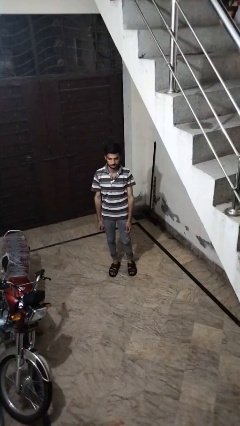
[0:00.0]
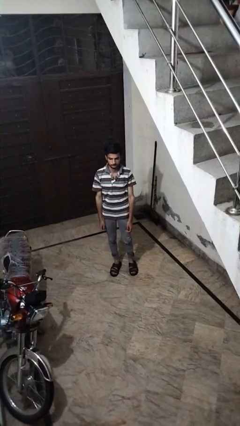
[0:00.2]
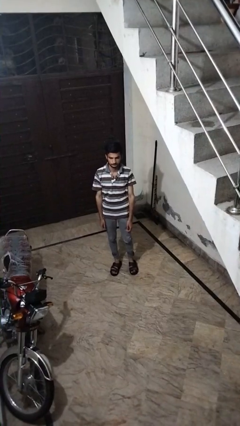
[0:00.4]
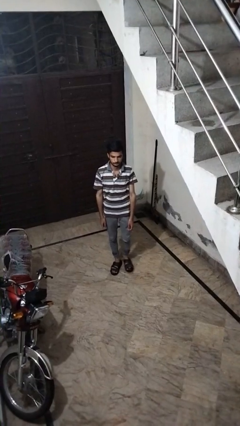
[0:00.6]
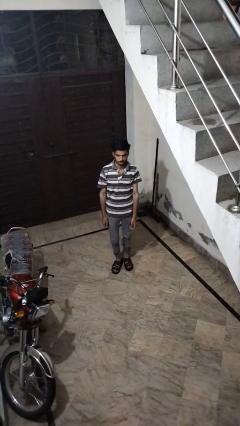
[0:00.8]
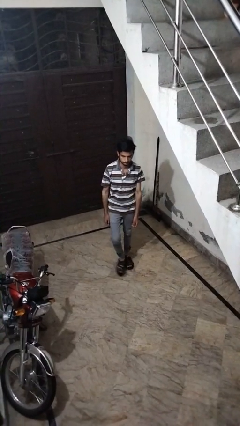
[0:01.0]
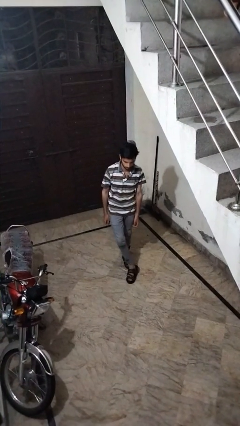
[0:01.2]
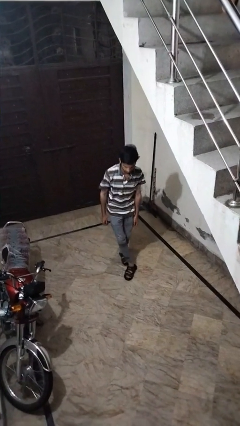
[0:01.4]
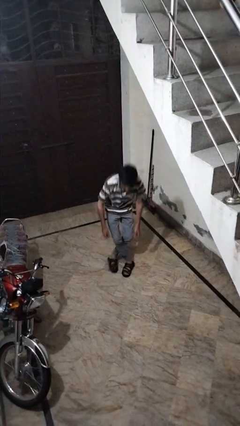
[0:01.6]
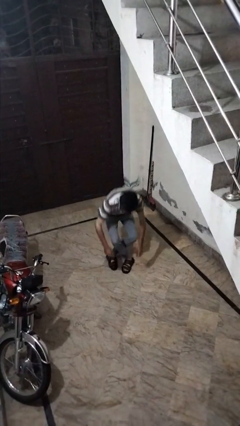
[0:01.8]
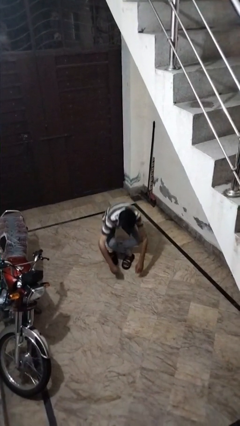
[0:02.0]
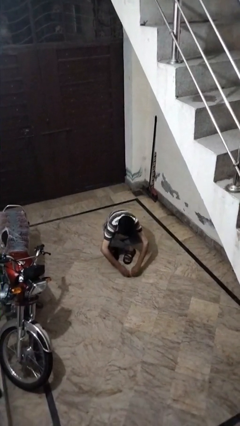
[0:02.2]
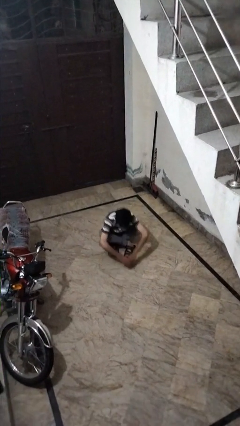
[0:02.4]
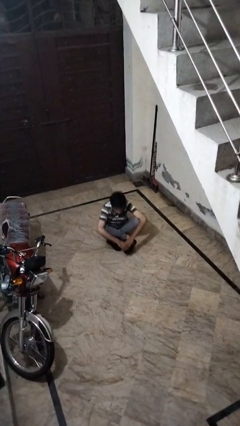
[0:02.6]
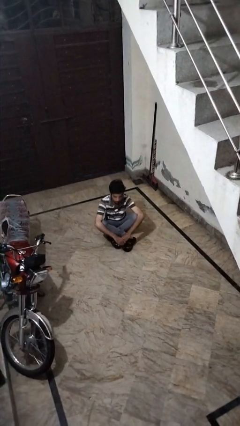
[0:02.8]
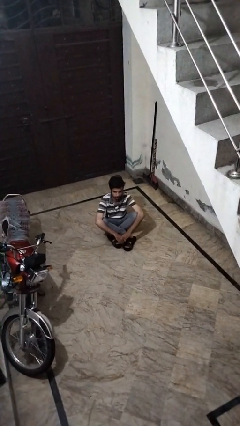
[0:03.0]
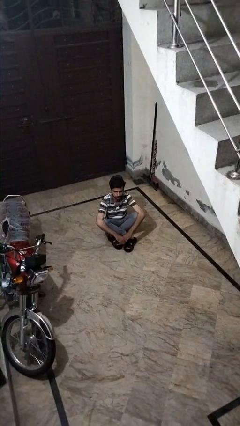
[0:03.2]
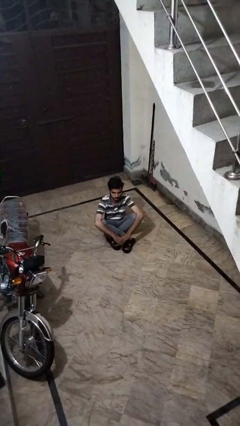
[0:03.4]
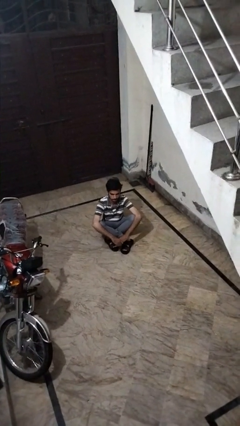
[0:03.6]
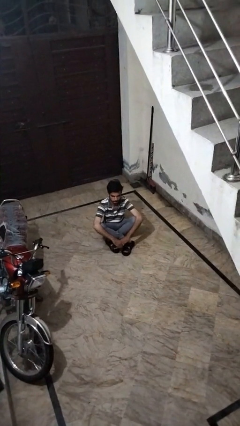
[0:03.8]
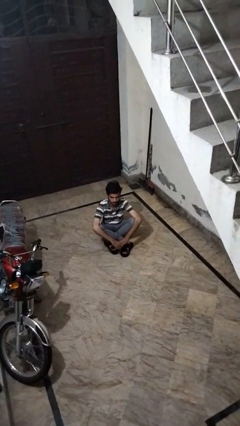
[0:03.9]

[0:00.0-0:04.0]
person sits crisscross

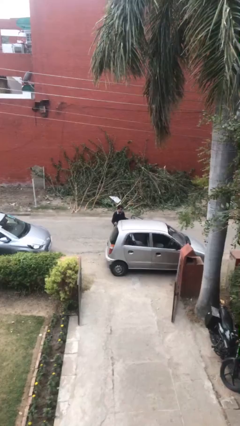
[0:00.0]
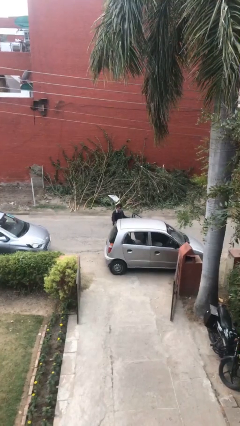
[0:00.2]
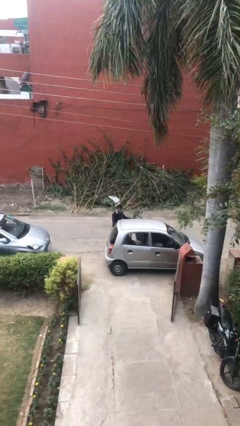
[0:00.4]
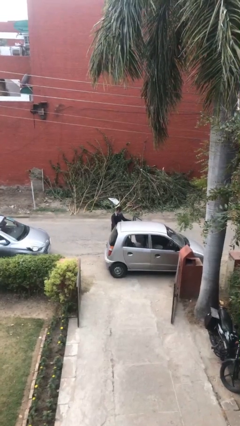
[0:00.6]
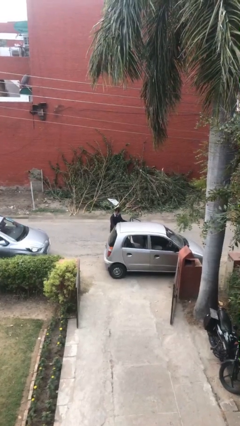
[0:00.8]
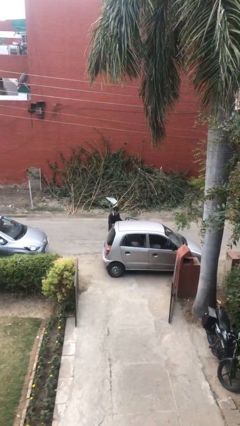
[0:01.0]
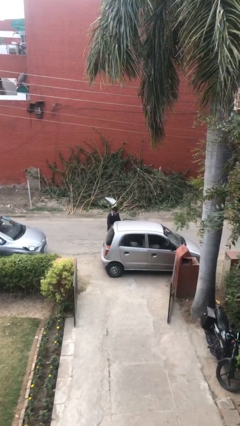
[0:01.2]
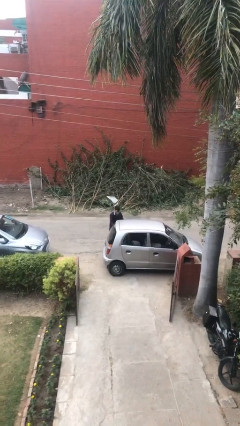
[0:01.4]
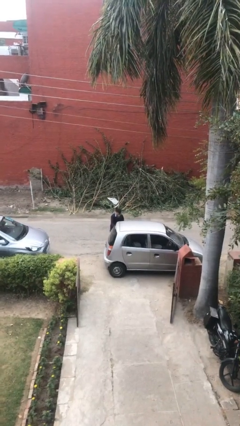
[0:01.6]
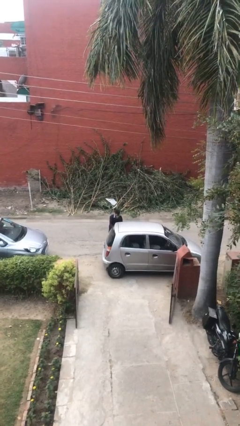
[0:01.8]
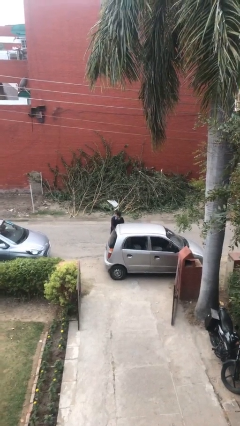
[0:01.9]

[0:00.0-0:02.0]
person closes car door

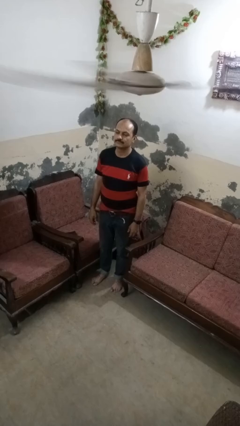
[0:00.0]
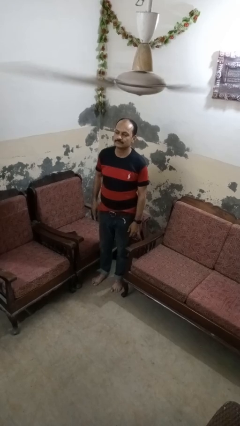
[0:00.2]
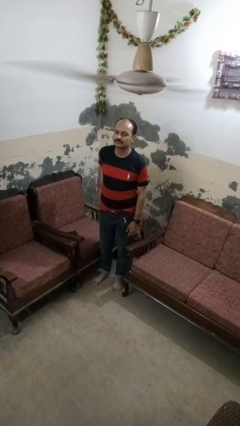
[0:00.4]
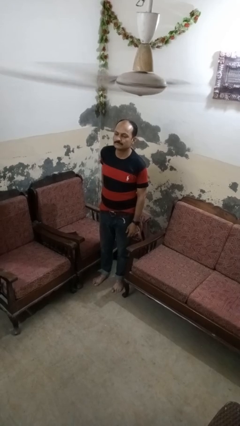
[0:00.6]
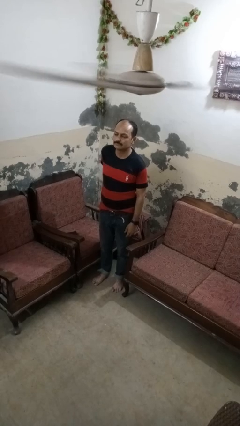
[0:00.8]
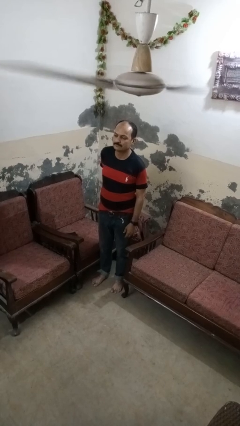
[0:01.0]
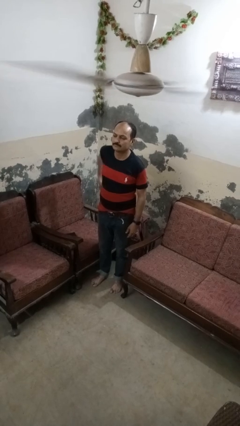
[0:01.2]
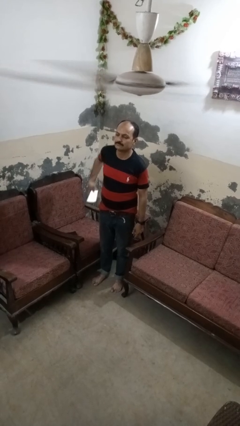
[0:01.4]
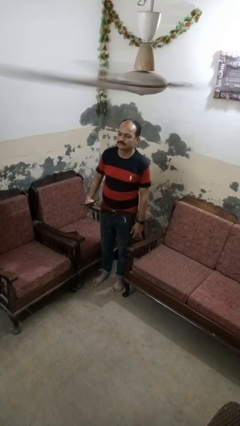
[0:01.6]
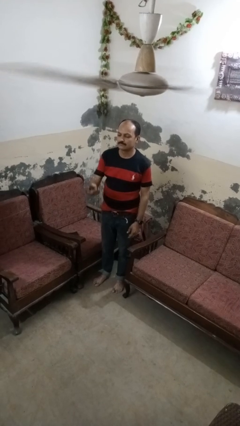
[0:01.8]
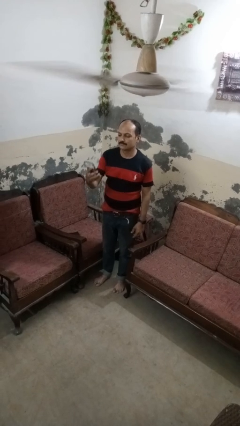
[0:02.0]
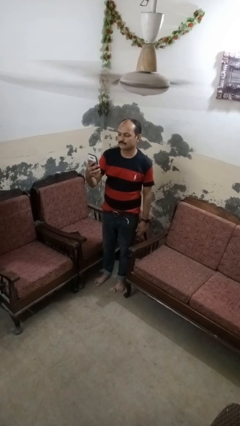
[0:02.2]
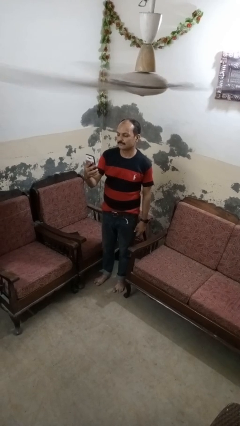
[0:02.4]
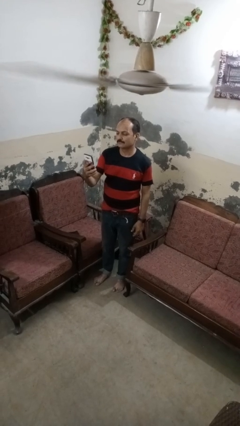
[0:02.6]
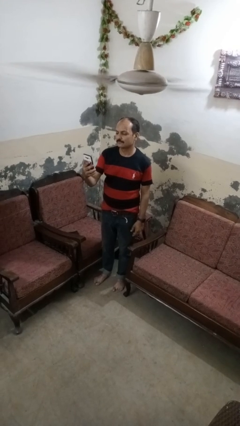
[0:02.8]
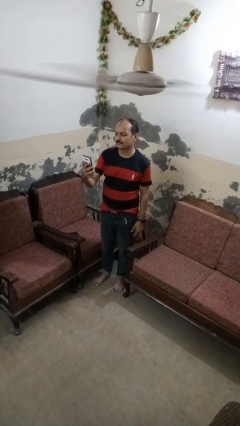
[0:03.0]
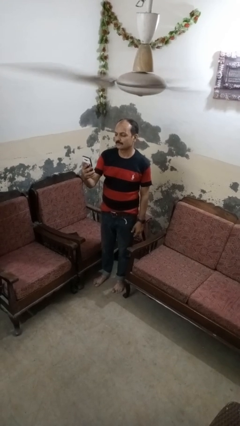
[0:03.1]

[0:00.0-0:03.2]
person takes phone from pocket

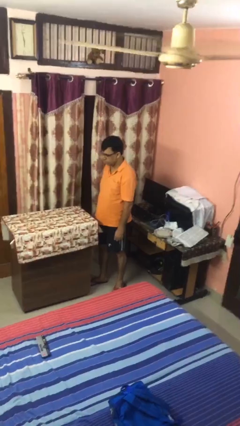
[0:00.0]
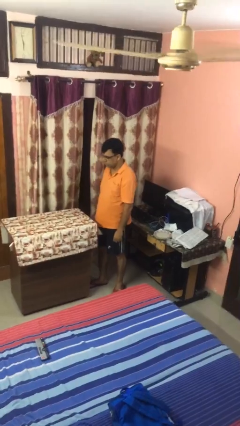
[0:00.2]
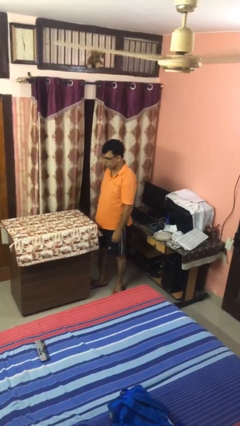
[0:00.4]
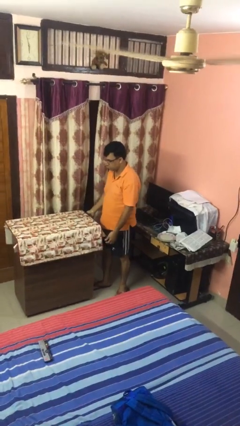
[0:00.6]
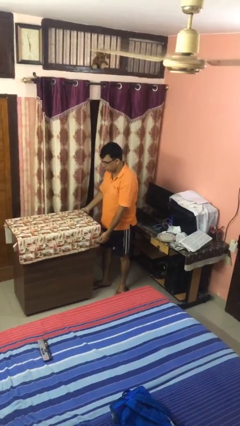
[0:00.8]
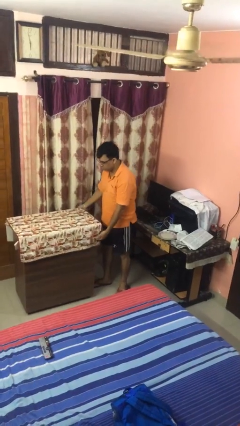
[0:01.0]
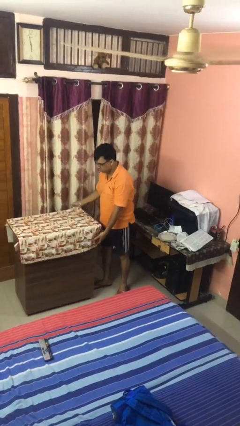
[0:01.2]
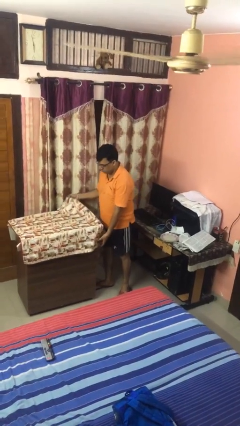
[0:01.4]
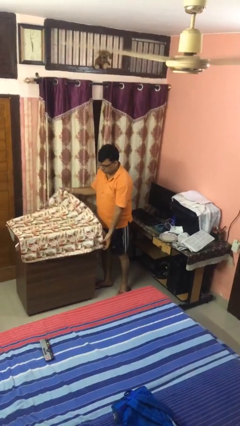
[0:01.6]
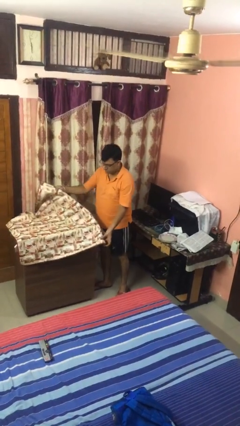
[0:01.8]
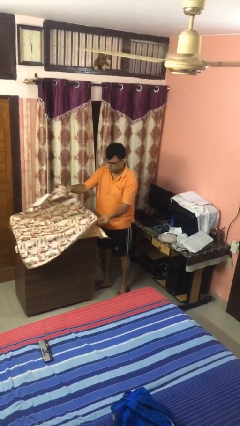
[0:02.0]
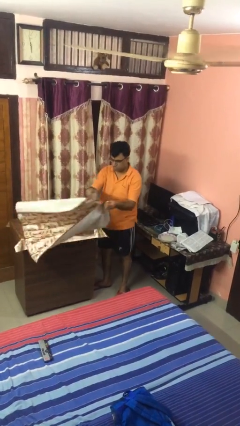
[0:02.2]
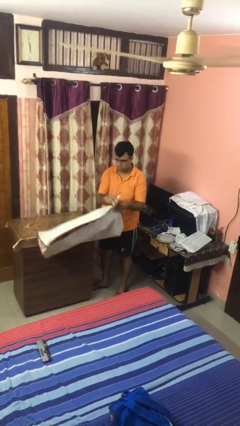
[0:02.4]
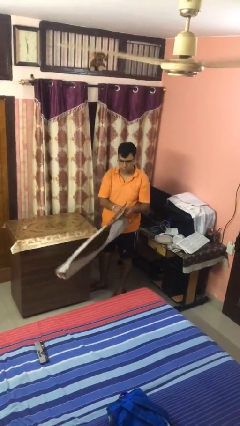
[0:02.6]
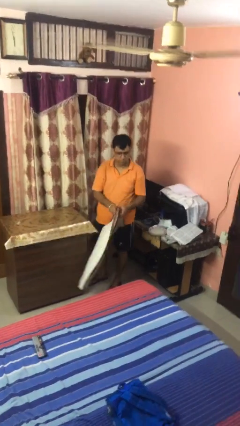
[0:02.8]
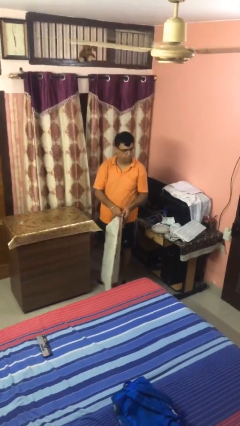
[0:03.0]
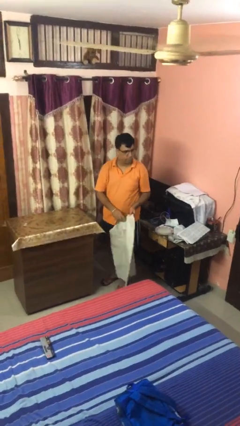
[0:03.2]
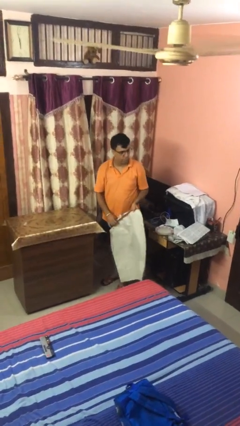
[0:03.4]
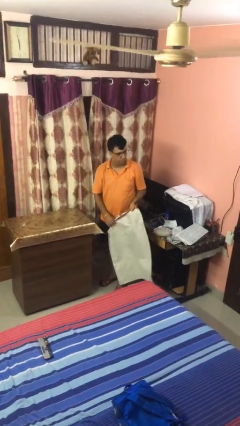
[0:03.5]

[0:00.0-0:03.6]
person folds tablecloth

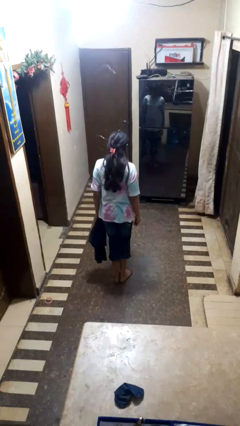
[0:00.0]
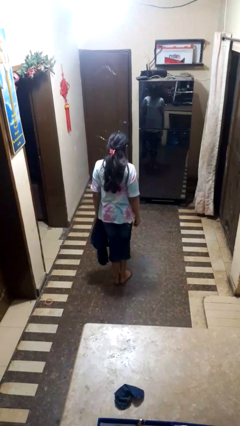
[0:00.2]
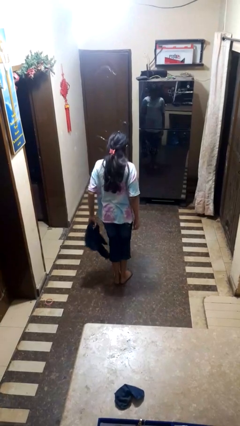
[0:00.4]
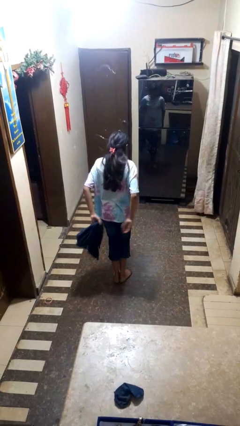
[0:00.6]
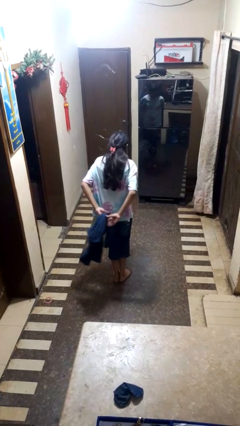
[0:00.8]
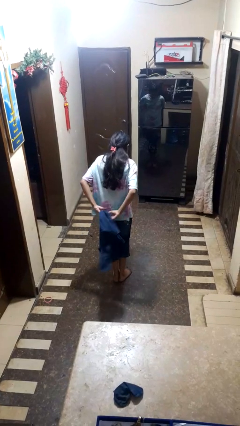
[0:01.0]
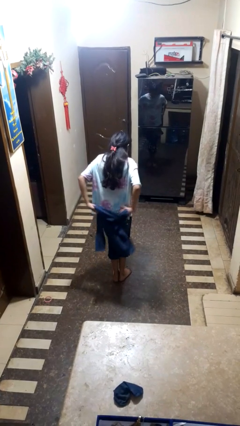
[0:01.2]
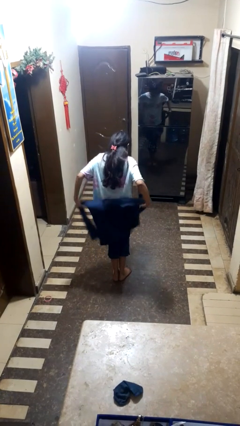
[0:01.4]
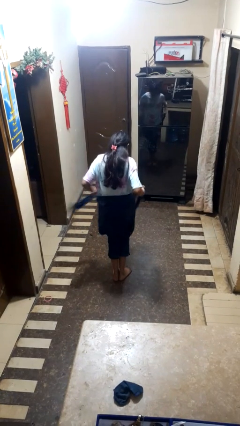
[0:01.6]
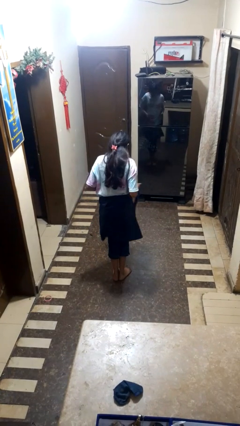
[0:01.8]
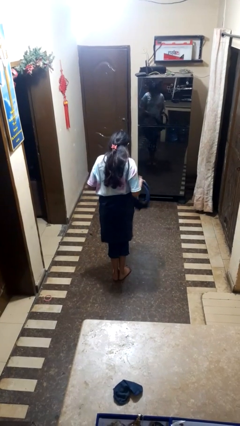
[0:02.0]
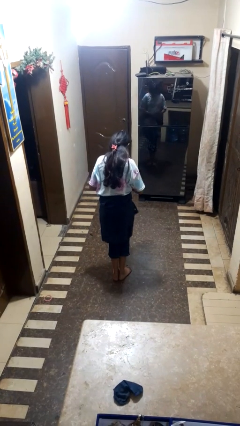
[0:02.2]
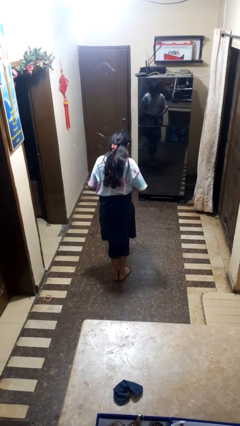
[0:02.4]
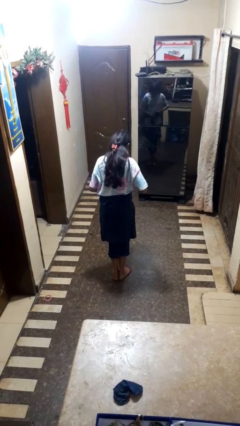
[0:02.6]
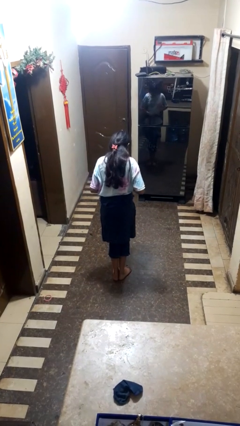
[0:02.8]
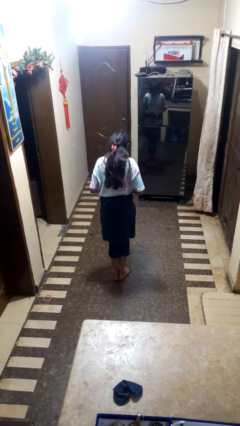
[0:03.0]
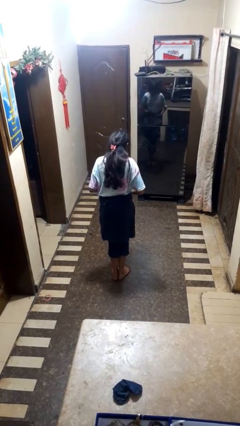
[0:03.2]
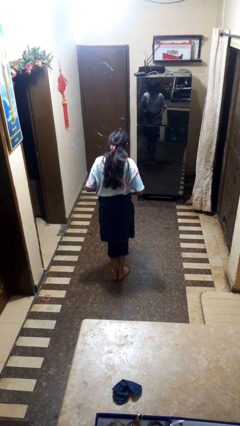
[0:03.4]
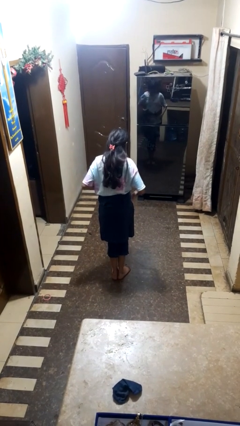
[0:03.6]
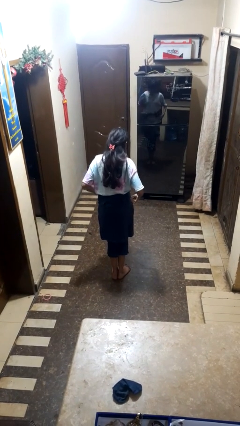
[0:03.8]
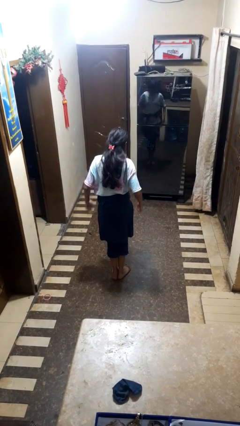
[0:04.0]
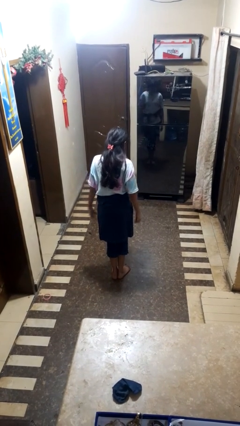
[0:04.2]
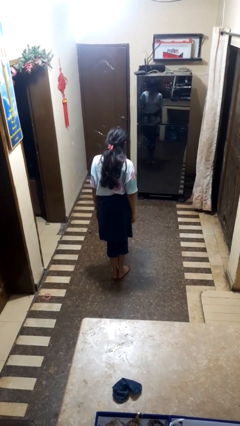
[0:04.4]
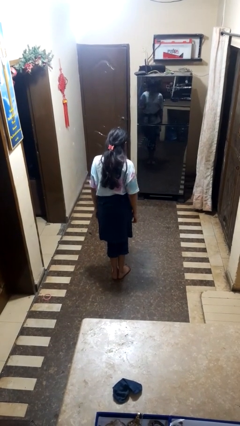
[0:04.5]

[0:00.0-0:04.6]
person ties jacket around waist

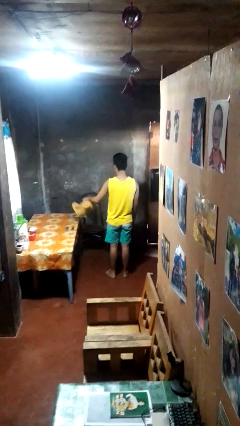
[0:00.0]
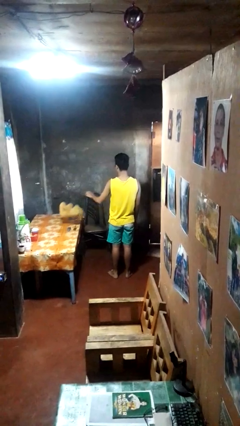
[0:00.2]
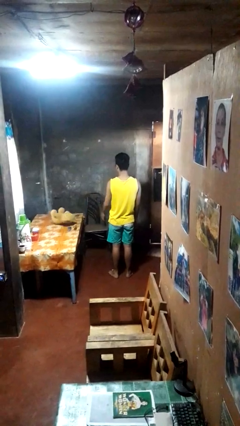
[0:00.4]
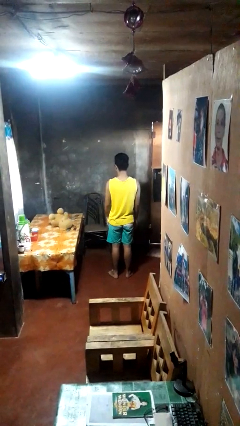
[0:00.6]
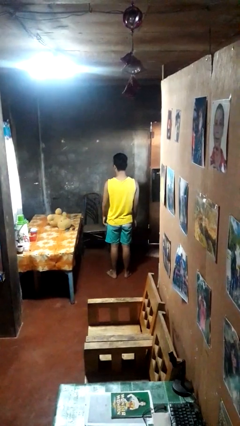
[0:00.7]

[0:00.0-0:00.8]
person throws object on table
